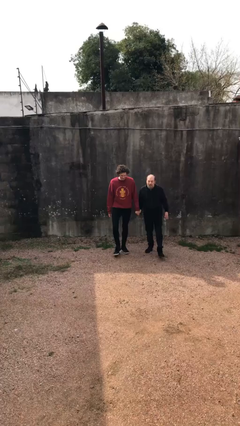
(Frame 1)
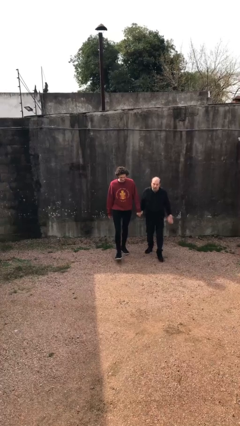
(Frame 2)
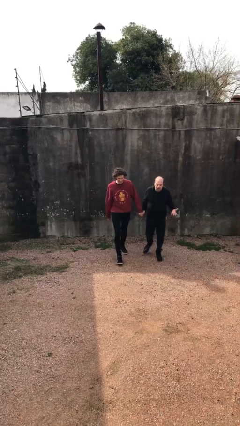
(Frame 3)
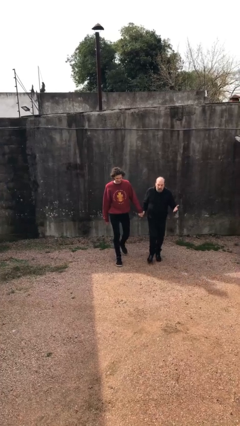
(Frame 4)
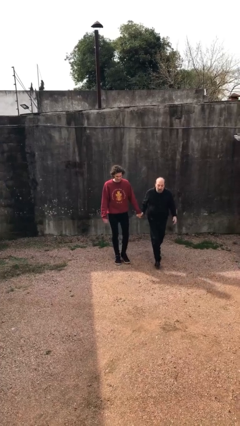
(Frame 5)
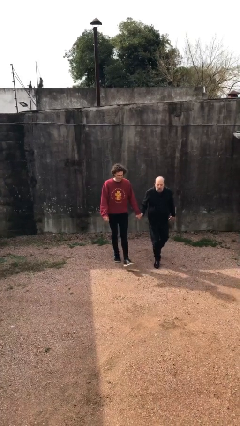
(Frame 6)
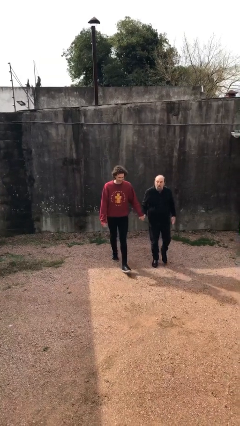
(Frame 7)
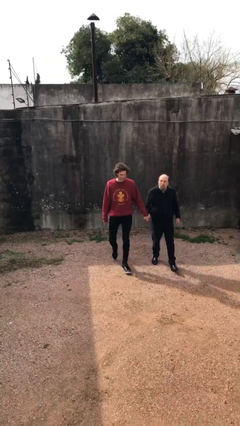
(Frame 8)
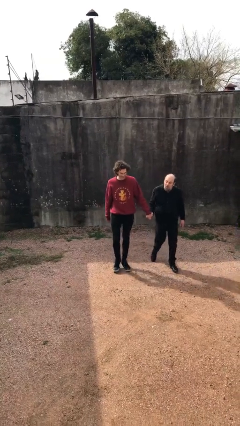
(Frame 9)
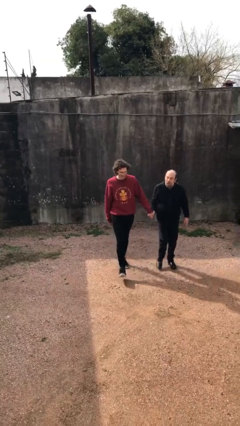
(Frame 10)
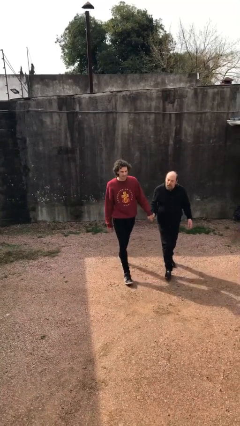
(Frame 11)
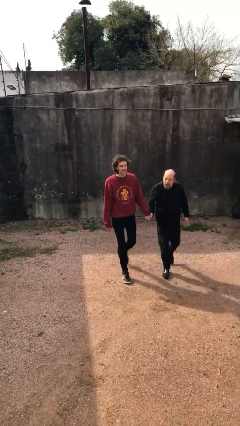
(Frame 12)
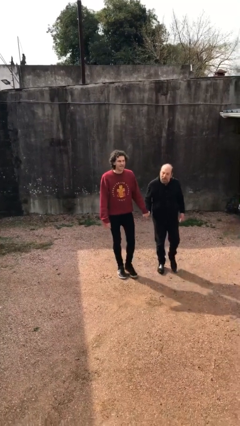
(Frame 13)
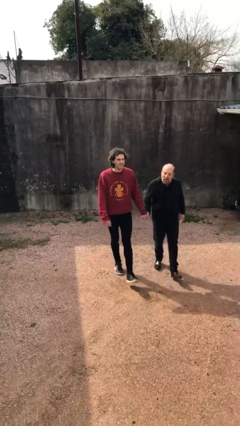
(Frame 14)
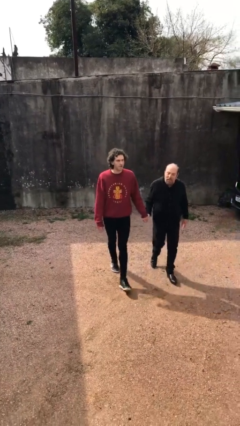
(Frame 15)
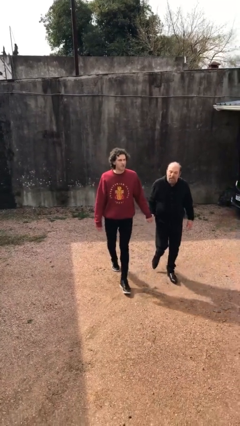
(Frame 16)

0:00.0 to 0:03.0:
person holds hand

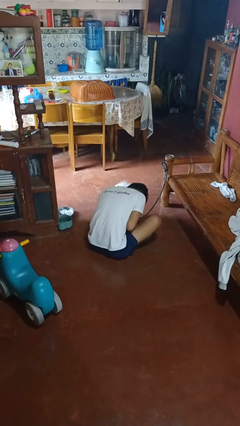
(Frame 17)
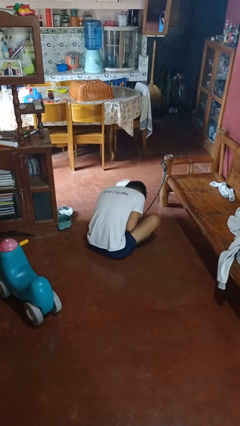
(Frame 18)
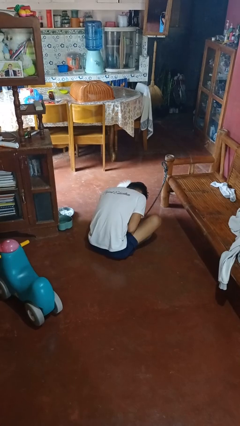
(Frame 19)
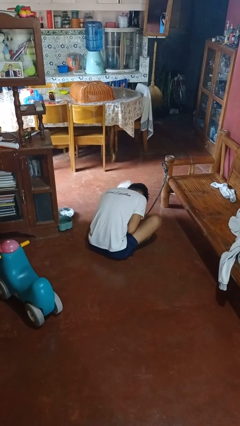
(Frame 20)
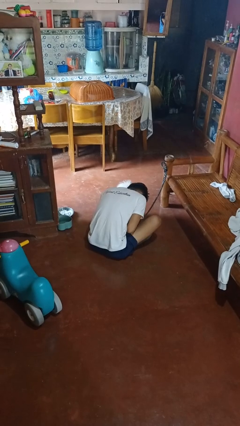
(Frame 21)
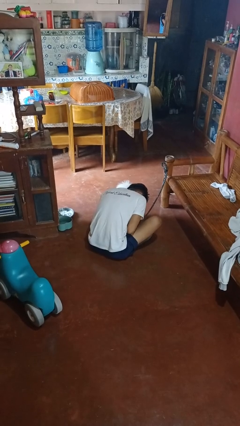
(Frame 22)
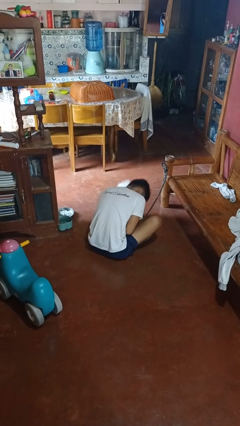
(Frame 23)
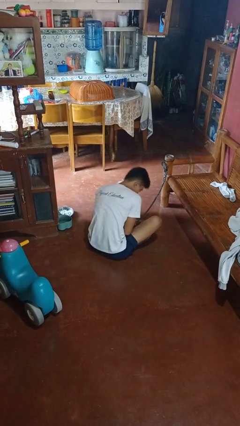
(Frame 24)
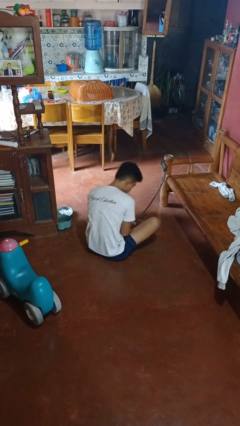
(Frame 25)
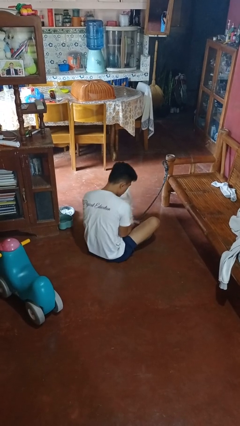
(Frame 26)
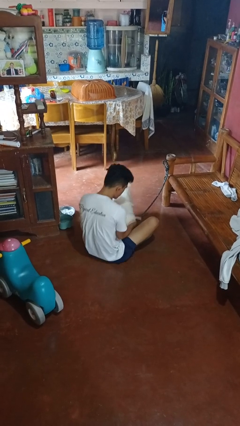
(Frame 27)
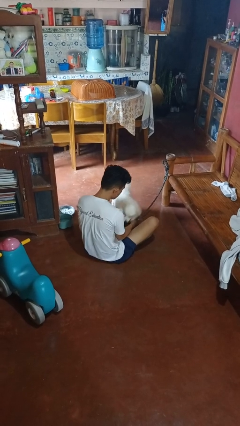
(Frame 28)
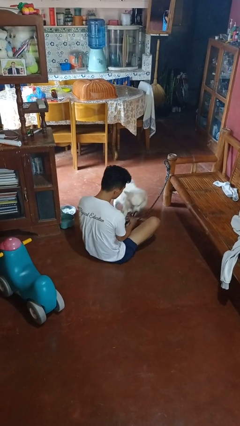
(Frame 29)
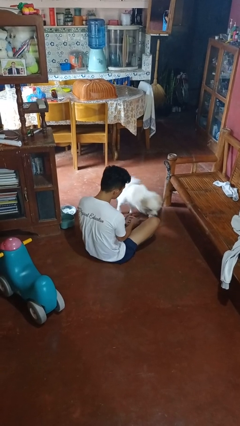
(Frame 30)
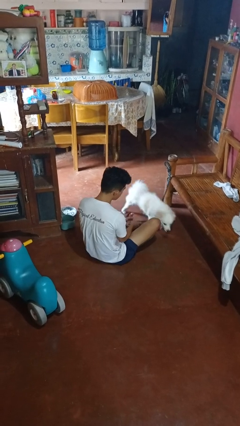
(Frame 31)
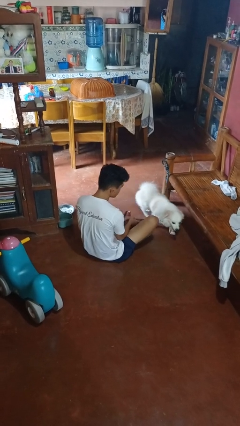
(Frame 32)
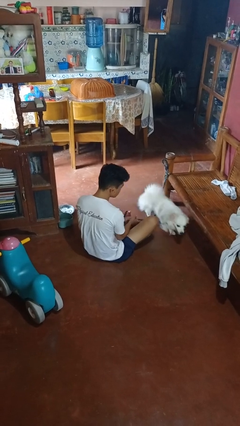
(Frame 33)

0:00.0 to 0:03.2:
person hugs dog

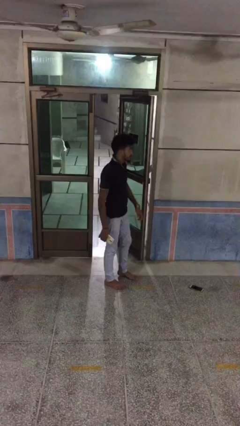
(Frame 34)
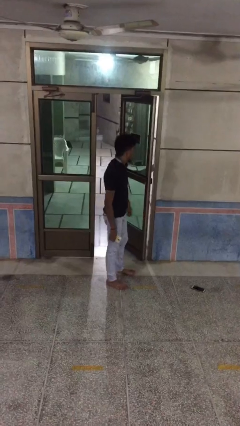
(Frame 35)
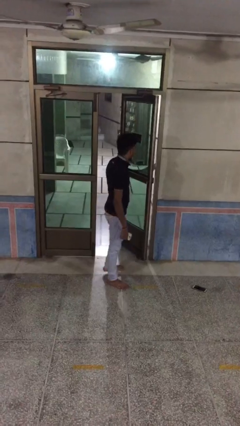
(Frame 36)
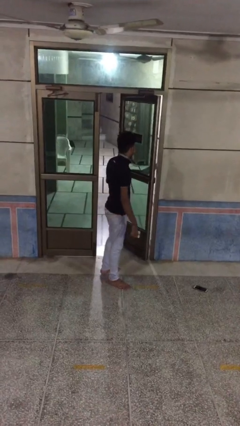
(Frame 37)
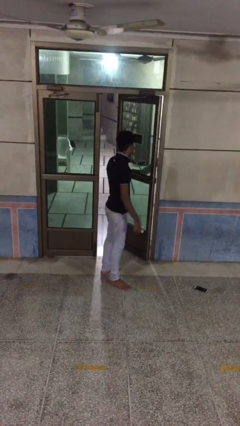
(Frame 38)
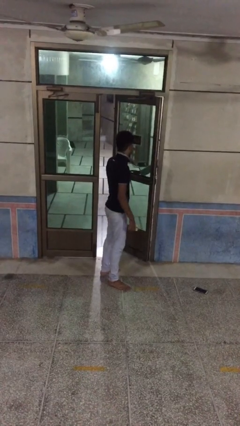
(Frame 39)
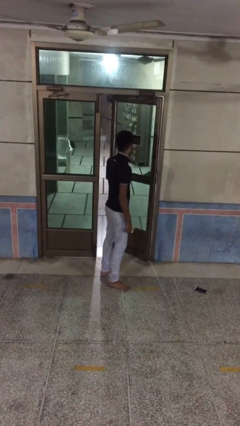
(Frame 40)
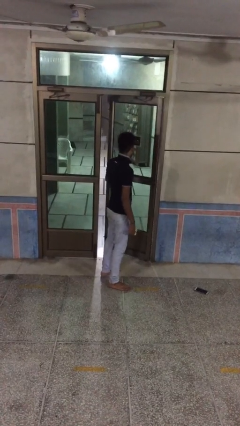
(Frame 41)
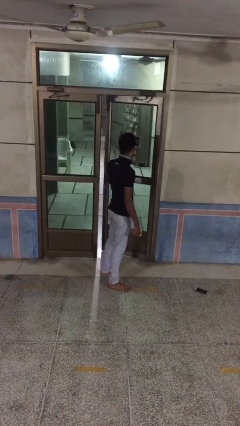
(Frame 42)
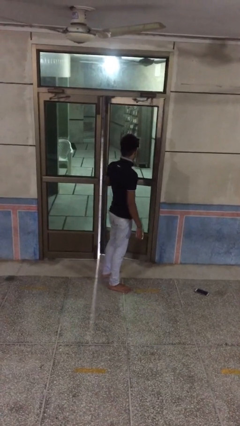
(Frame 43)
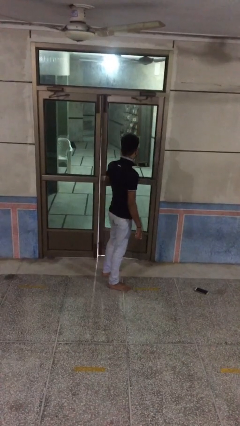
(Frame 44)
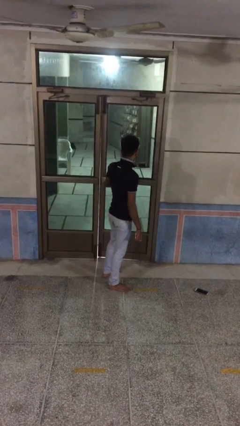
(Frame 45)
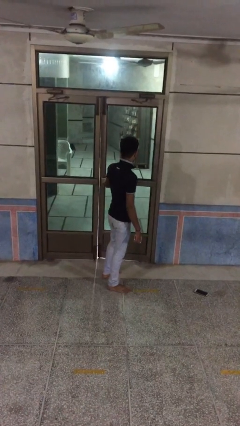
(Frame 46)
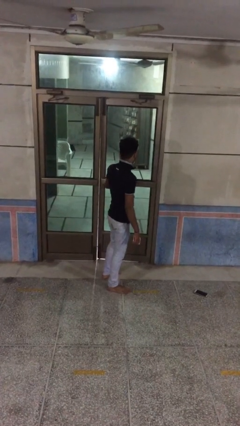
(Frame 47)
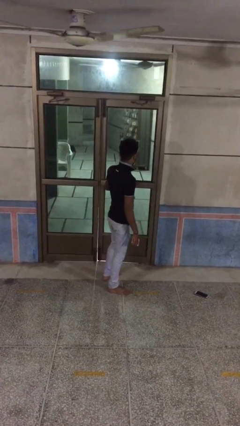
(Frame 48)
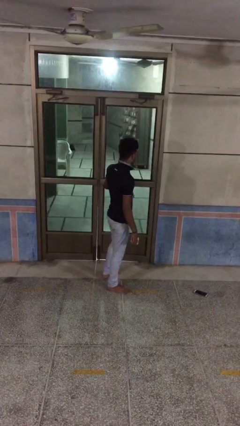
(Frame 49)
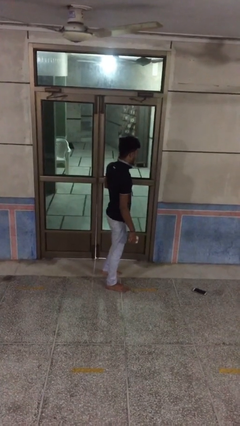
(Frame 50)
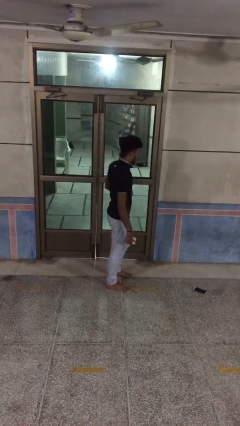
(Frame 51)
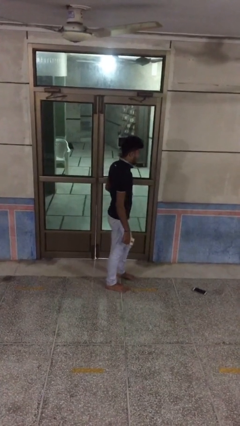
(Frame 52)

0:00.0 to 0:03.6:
person closes facility door

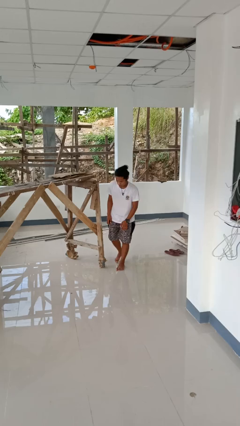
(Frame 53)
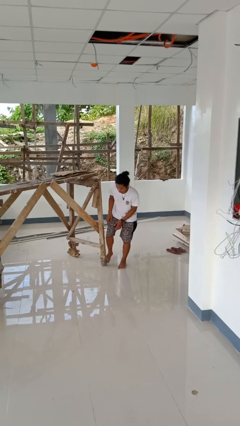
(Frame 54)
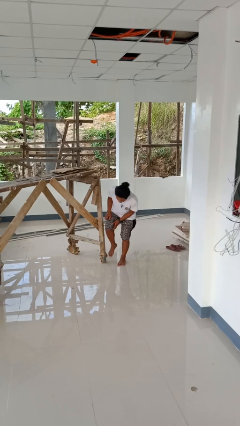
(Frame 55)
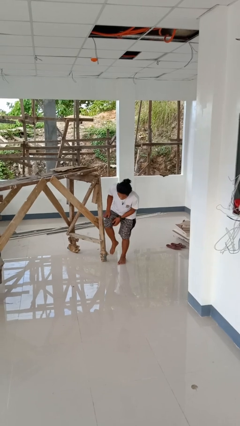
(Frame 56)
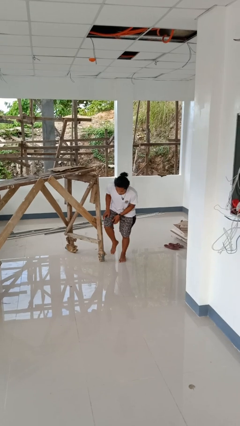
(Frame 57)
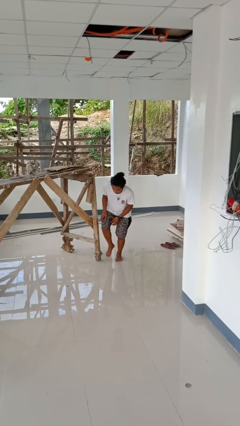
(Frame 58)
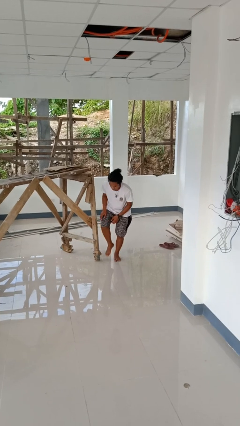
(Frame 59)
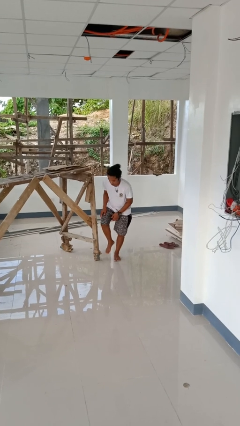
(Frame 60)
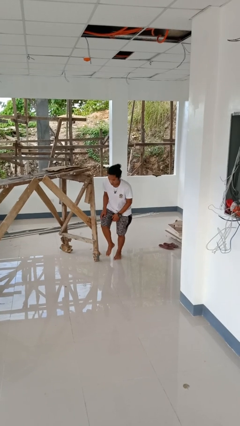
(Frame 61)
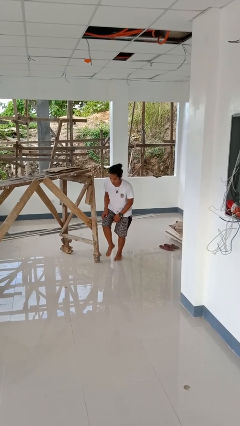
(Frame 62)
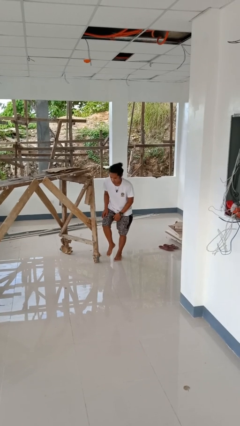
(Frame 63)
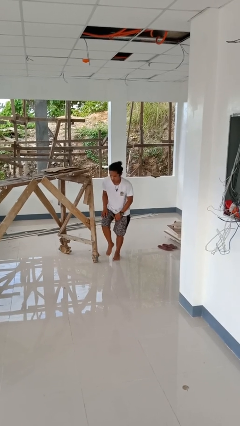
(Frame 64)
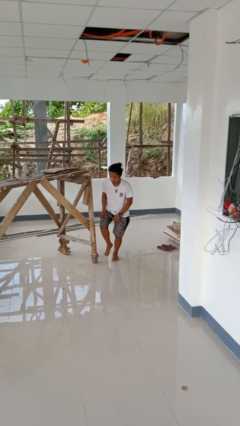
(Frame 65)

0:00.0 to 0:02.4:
person stubs toe

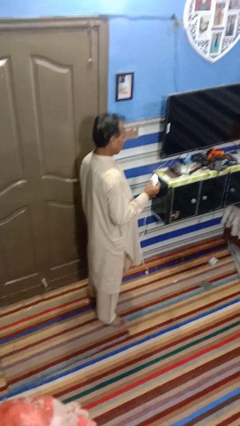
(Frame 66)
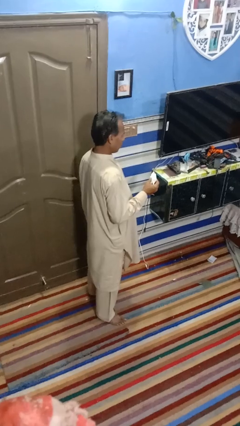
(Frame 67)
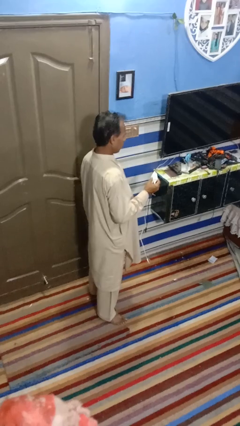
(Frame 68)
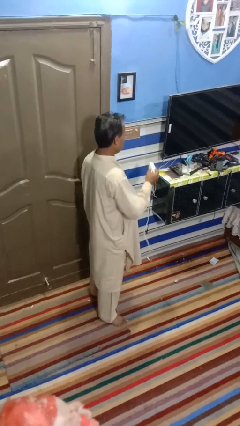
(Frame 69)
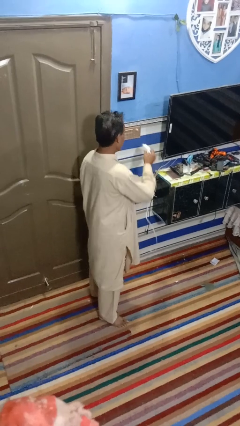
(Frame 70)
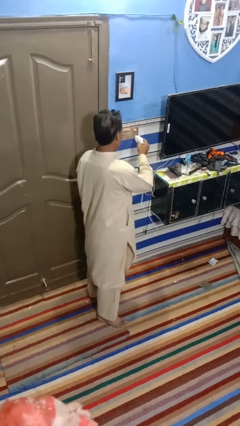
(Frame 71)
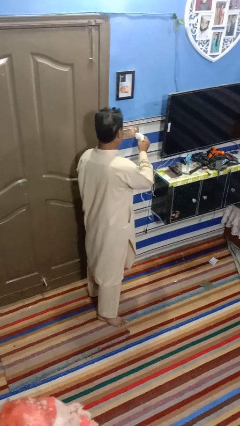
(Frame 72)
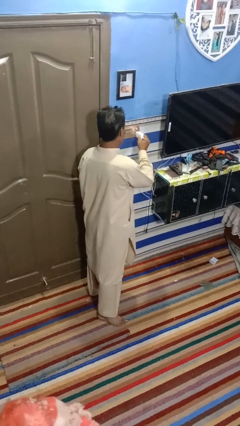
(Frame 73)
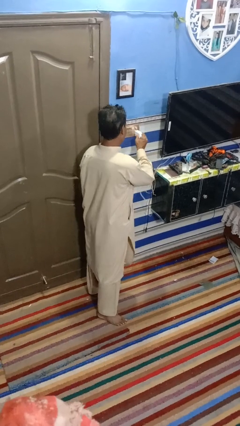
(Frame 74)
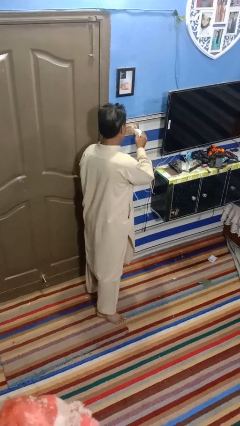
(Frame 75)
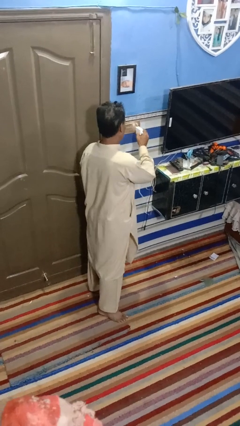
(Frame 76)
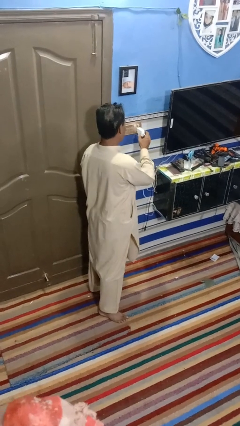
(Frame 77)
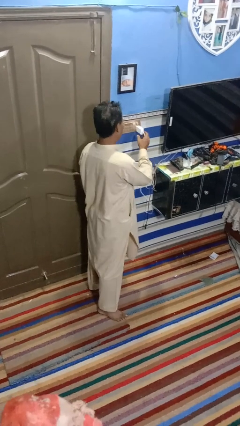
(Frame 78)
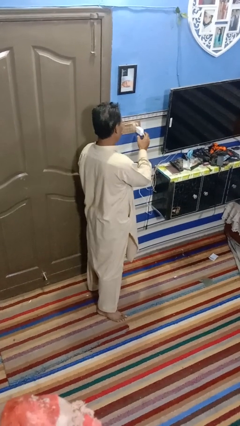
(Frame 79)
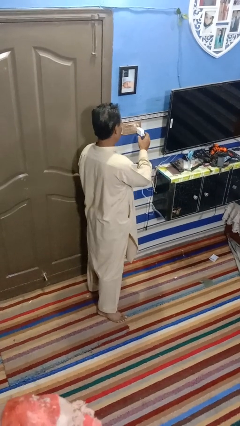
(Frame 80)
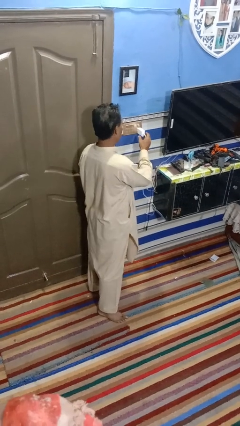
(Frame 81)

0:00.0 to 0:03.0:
person plugs into electrical socket

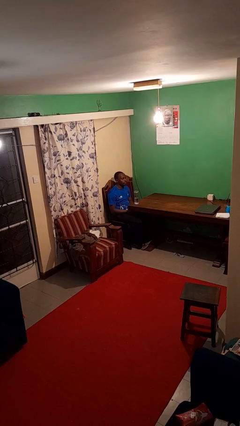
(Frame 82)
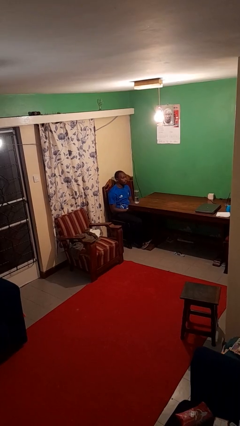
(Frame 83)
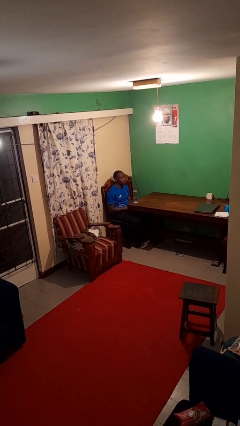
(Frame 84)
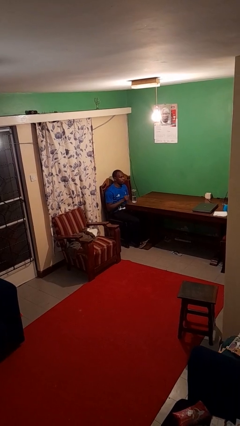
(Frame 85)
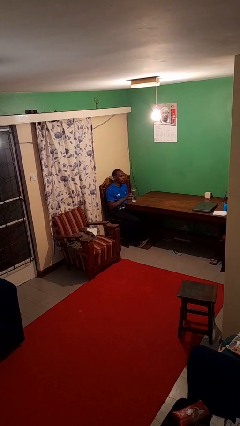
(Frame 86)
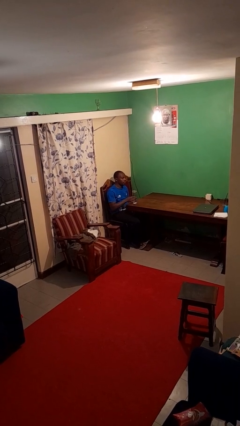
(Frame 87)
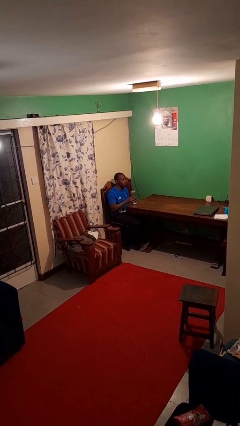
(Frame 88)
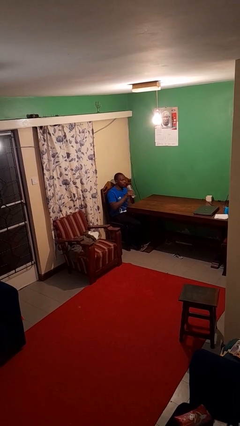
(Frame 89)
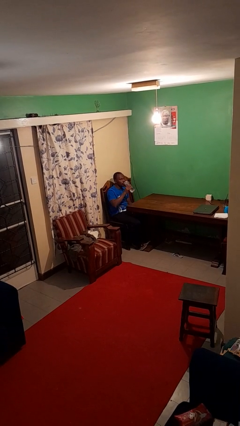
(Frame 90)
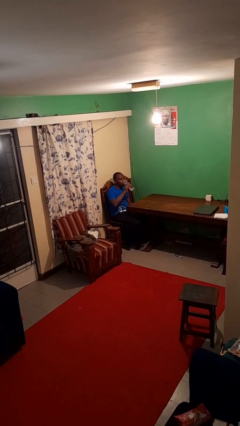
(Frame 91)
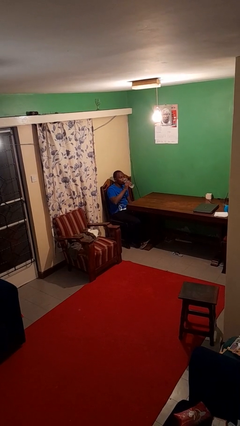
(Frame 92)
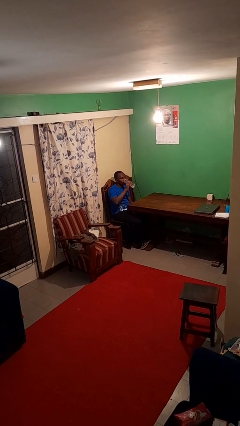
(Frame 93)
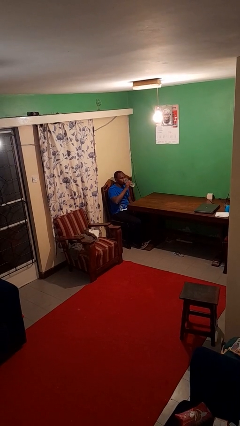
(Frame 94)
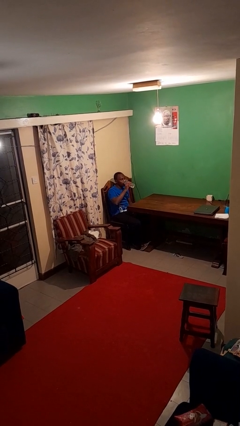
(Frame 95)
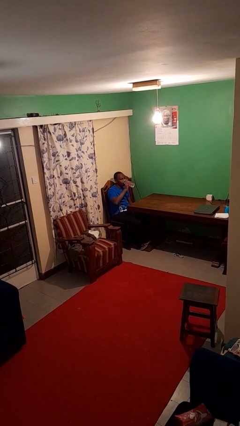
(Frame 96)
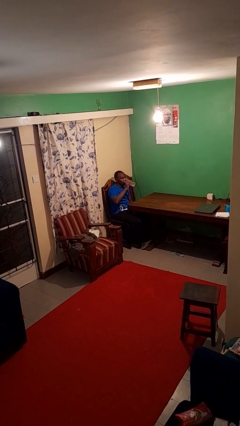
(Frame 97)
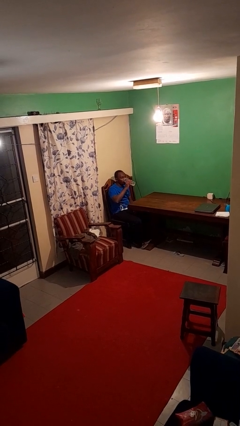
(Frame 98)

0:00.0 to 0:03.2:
person drinks from bottle
